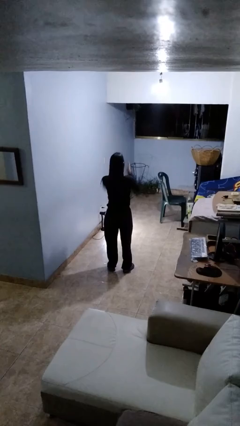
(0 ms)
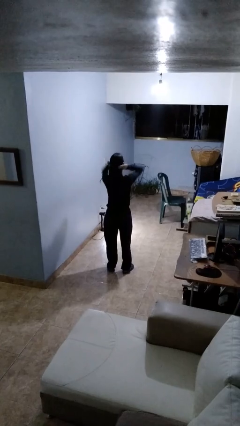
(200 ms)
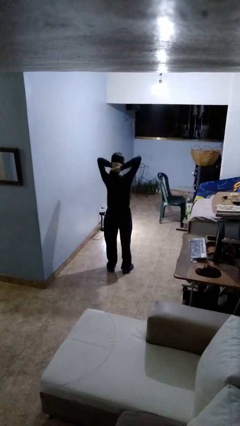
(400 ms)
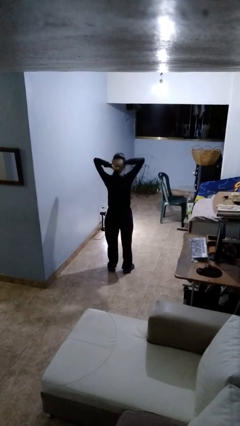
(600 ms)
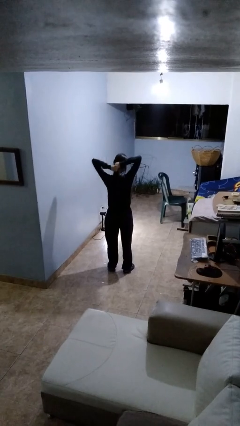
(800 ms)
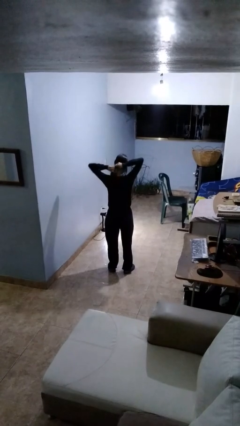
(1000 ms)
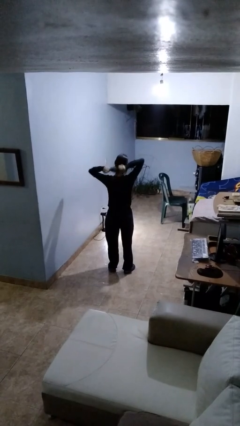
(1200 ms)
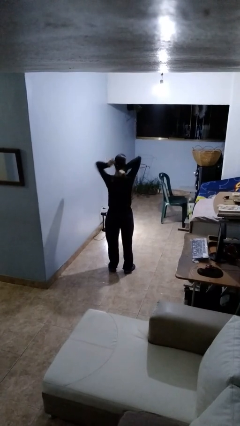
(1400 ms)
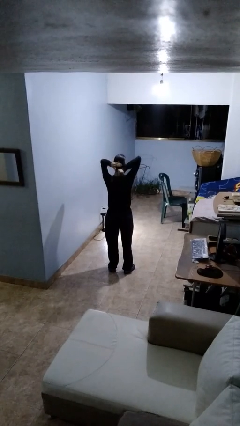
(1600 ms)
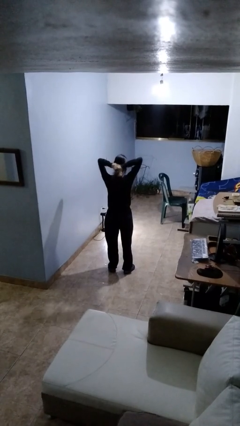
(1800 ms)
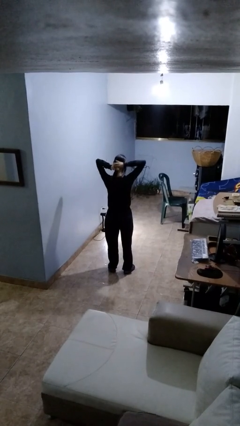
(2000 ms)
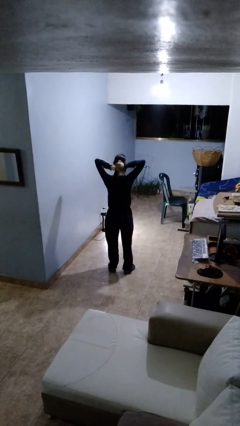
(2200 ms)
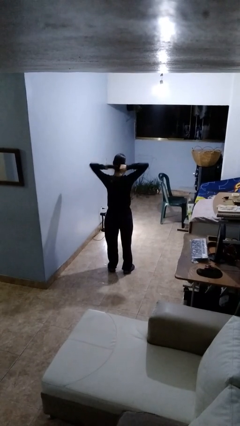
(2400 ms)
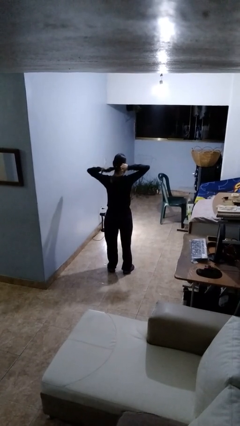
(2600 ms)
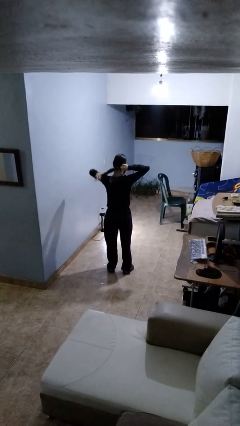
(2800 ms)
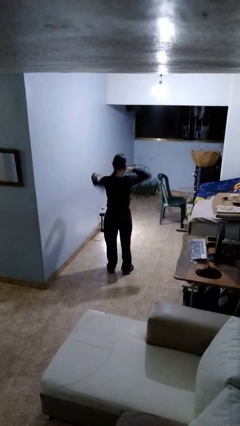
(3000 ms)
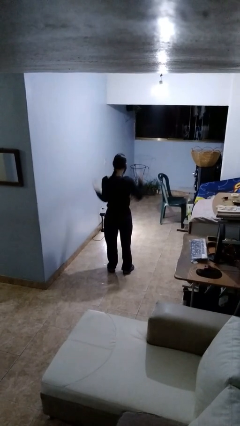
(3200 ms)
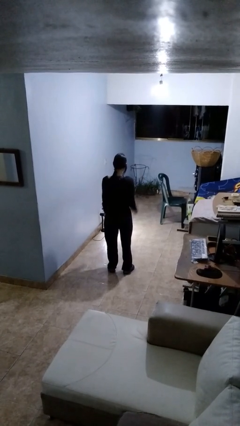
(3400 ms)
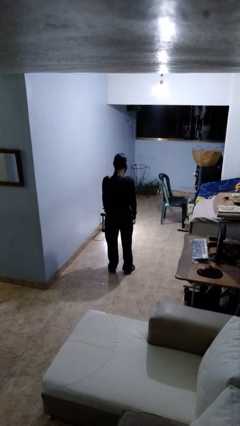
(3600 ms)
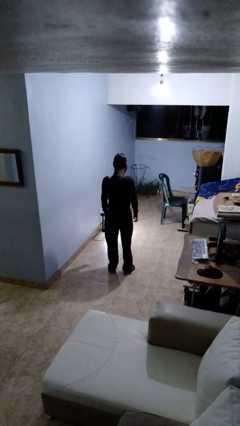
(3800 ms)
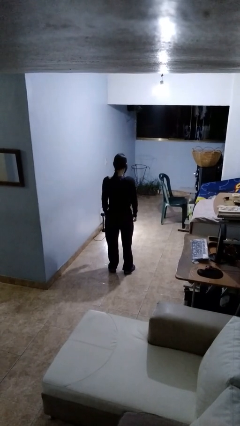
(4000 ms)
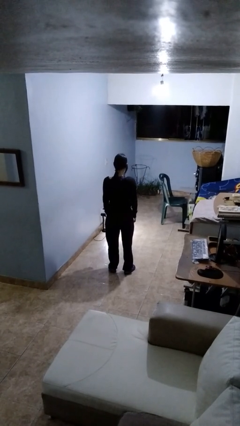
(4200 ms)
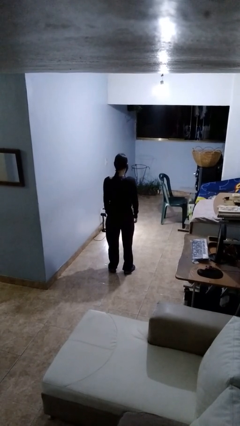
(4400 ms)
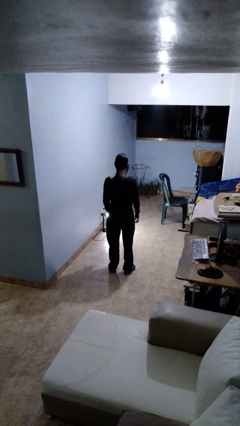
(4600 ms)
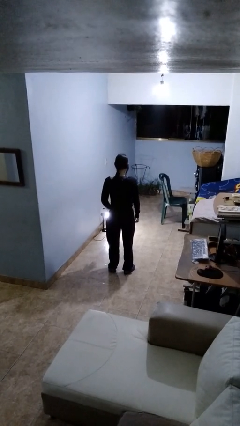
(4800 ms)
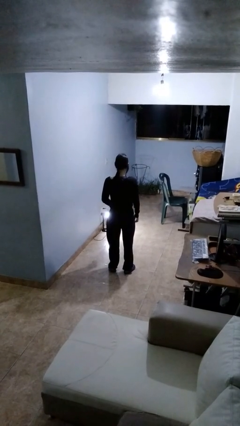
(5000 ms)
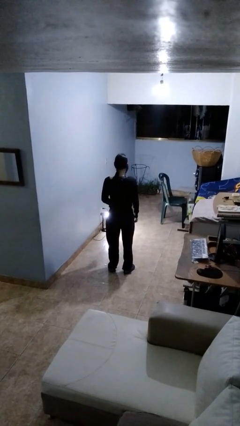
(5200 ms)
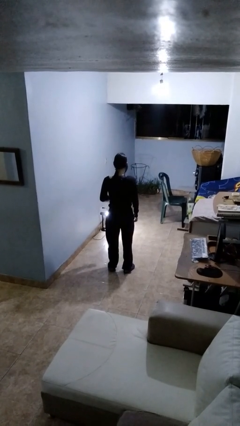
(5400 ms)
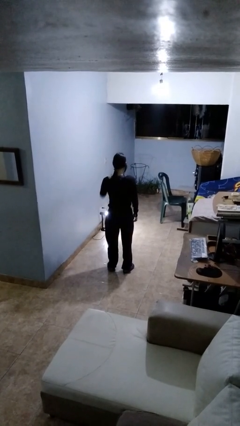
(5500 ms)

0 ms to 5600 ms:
person puts hair in ponytail

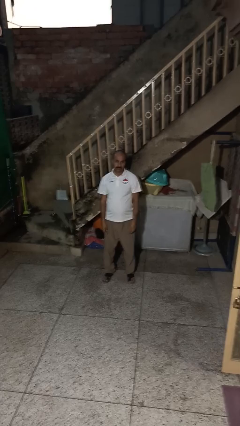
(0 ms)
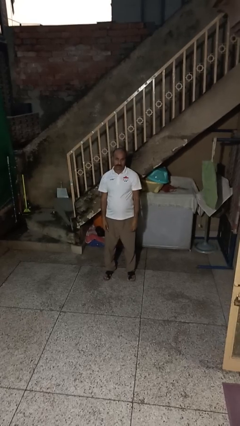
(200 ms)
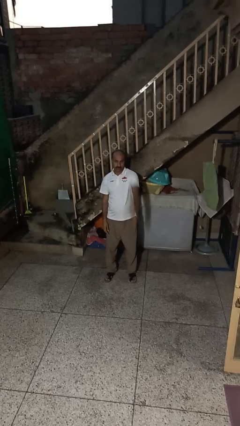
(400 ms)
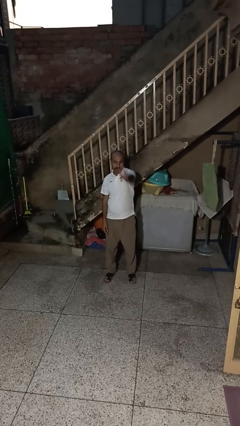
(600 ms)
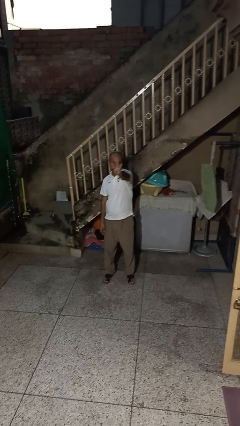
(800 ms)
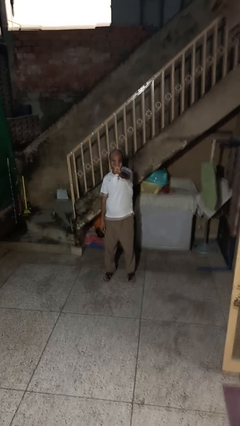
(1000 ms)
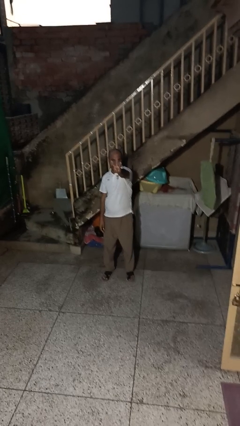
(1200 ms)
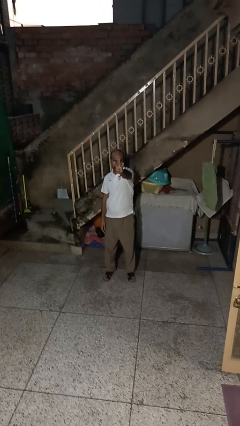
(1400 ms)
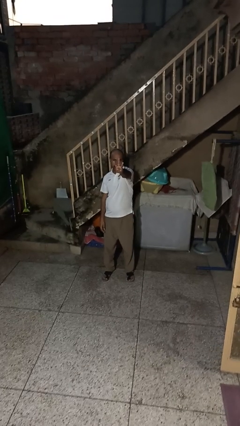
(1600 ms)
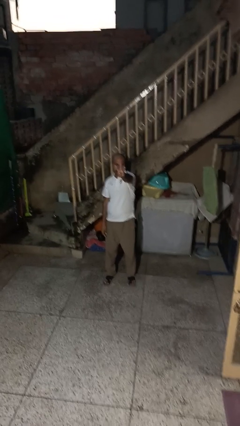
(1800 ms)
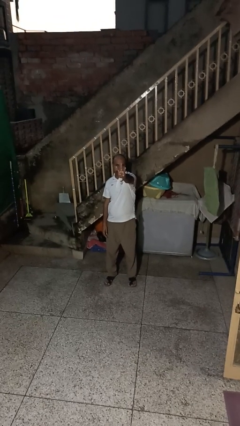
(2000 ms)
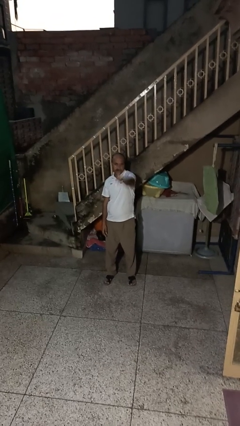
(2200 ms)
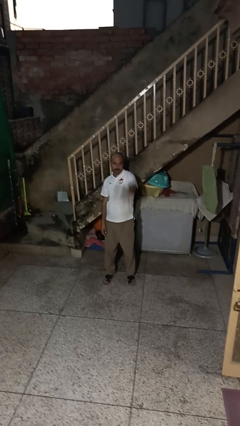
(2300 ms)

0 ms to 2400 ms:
person gestures number three

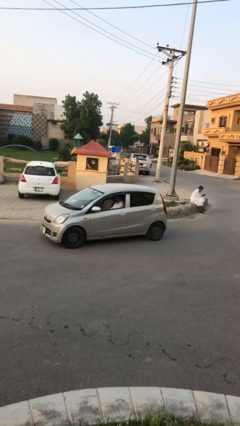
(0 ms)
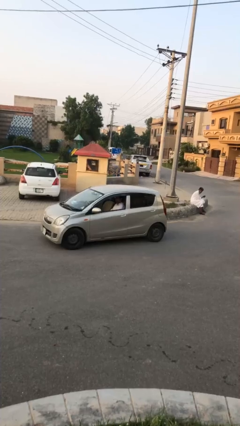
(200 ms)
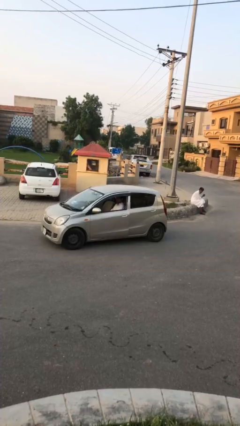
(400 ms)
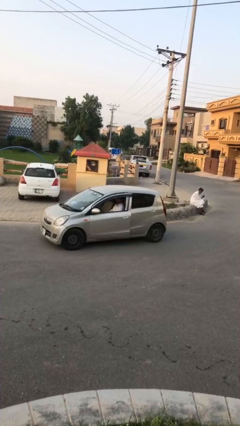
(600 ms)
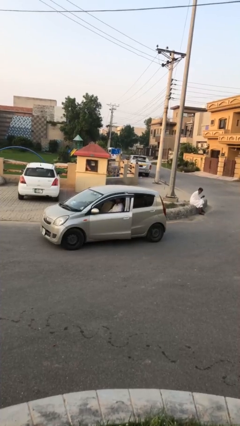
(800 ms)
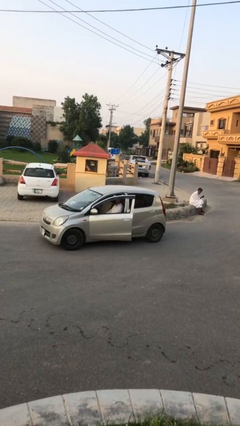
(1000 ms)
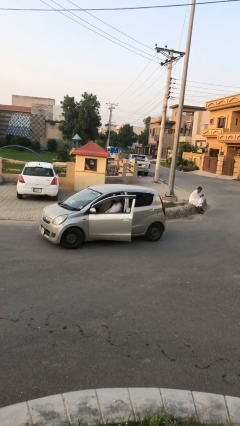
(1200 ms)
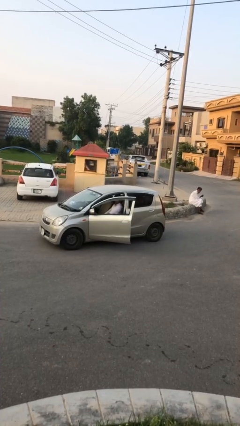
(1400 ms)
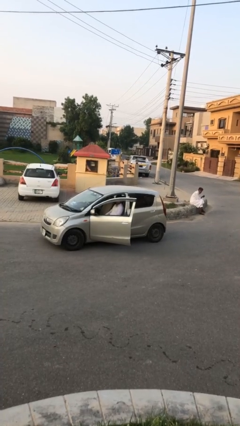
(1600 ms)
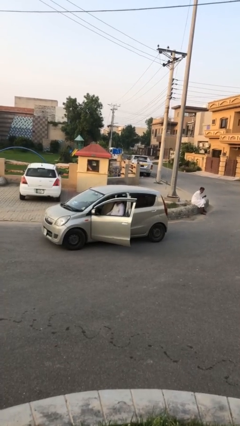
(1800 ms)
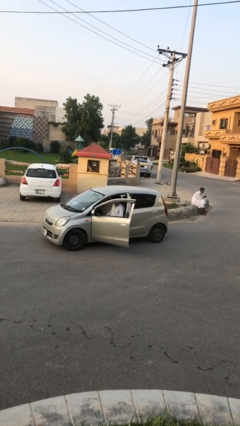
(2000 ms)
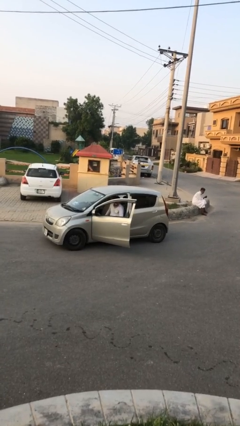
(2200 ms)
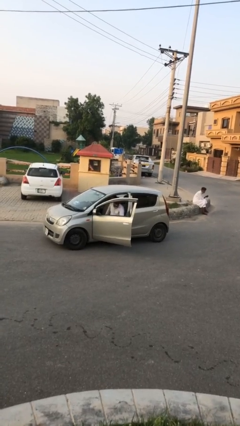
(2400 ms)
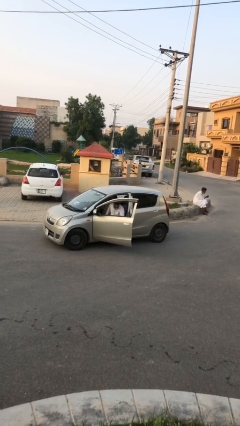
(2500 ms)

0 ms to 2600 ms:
person opens car door

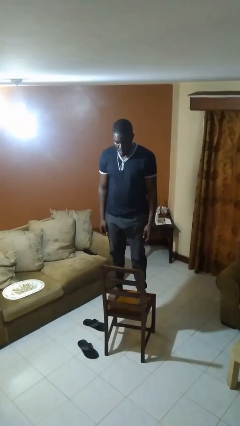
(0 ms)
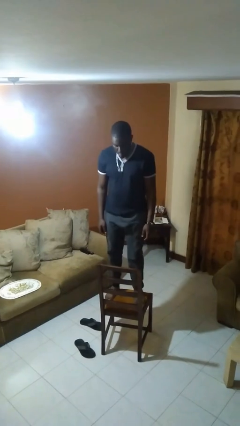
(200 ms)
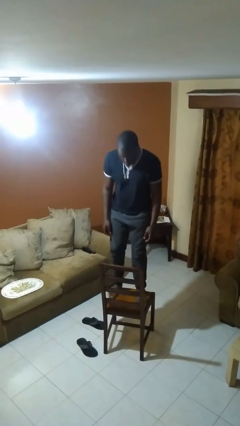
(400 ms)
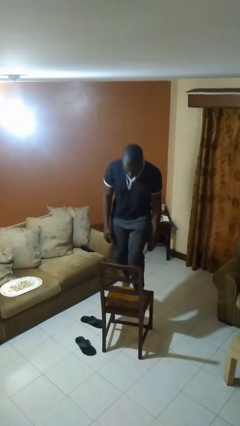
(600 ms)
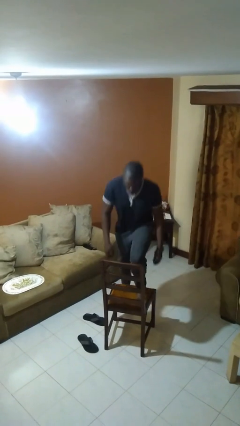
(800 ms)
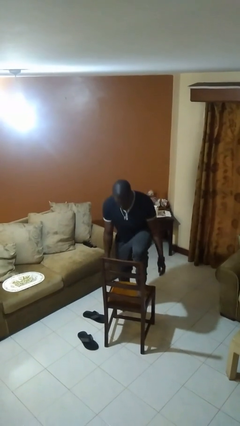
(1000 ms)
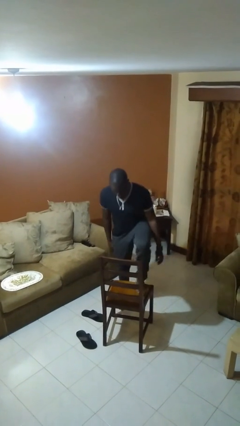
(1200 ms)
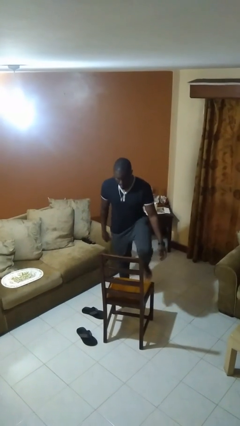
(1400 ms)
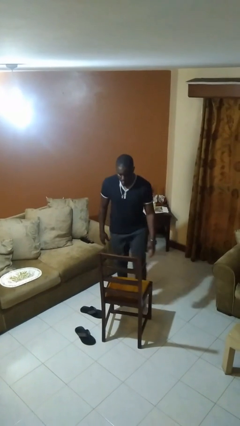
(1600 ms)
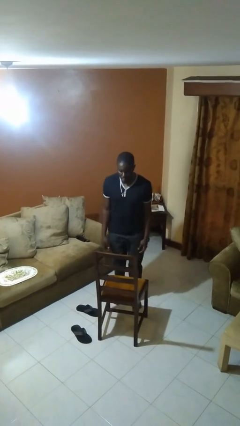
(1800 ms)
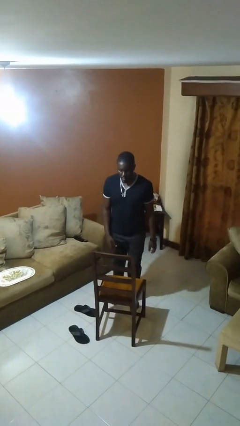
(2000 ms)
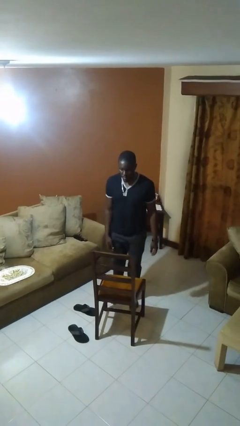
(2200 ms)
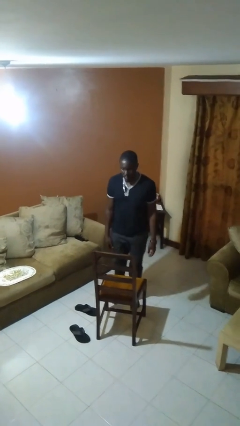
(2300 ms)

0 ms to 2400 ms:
person climbs off chair

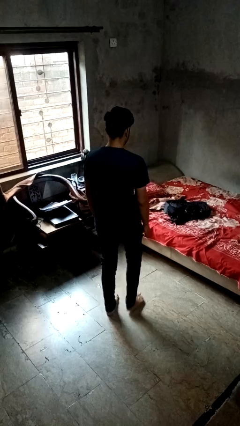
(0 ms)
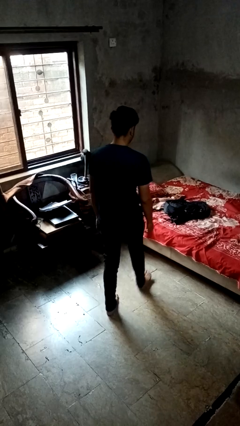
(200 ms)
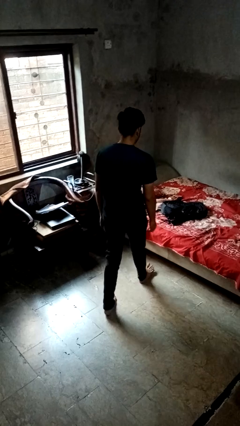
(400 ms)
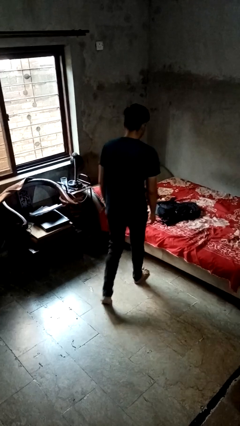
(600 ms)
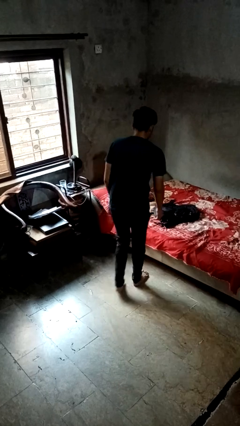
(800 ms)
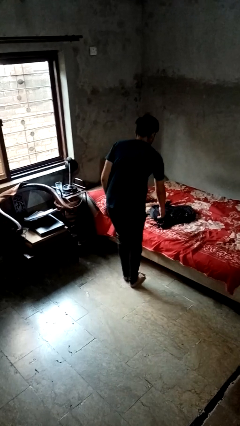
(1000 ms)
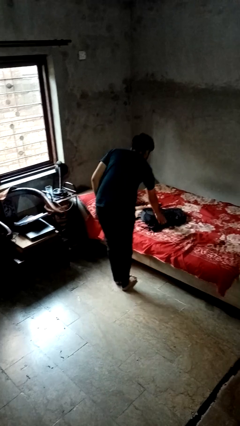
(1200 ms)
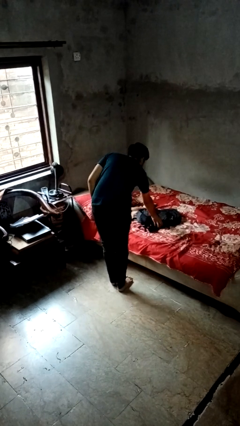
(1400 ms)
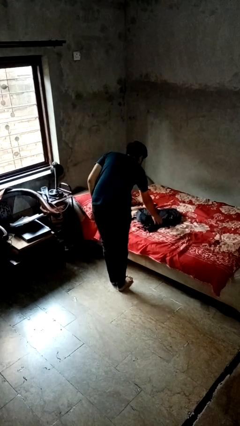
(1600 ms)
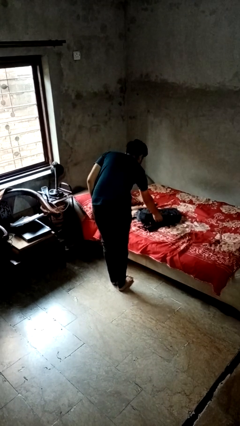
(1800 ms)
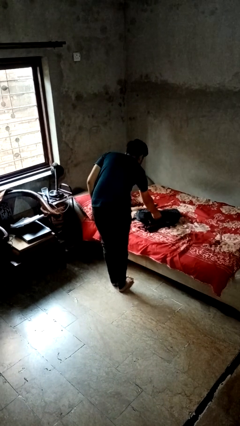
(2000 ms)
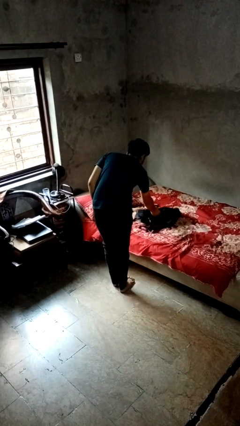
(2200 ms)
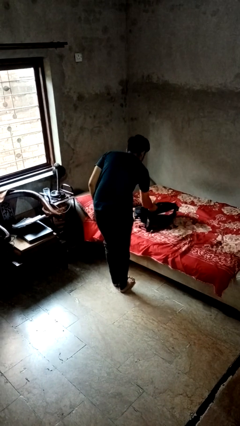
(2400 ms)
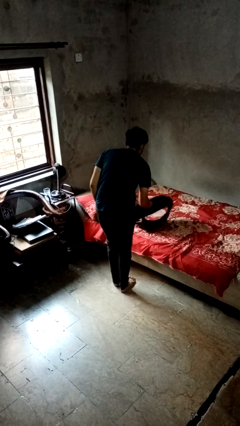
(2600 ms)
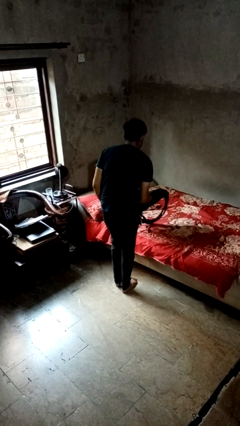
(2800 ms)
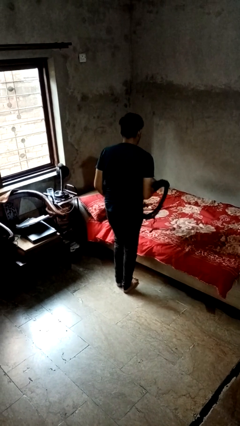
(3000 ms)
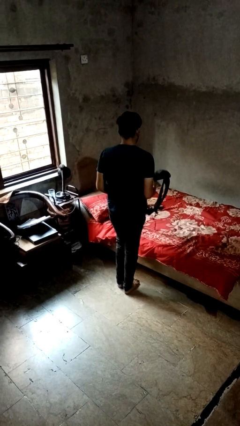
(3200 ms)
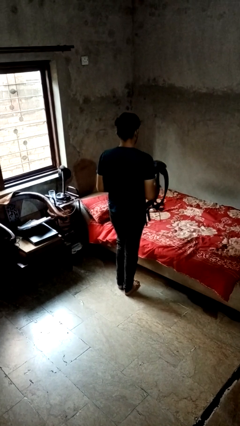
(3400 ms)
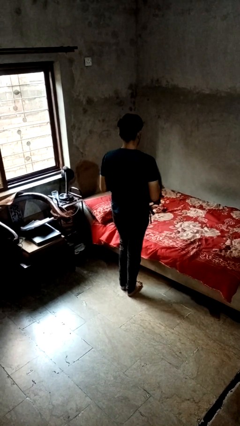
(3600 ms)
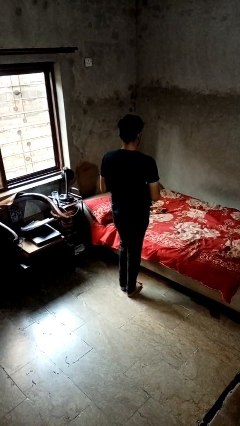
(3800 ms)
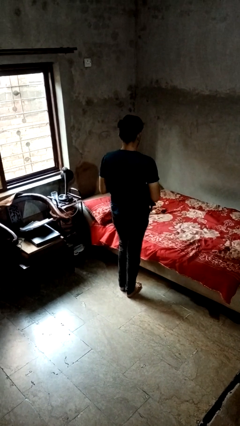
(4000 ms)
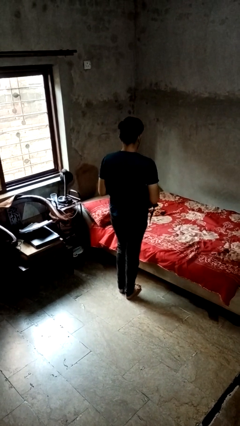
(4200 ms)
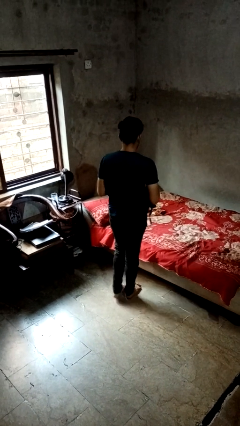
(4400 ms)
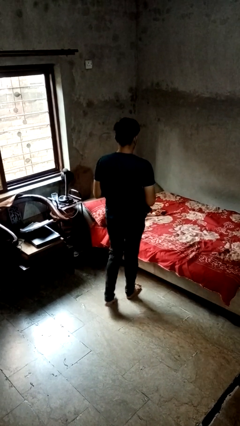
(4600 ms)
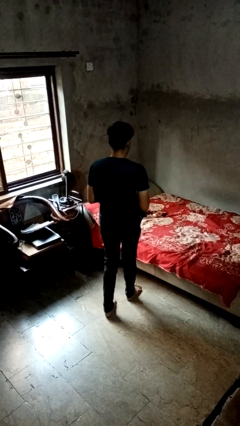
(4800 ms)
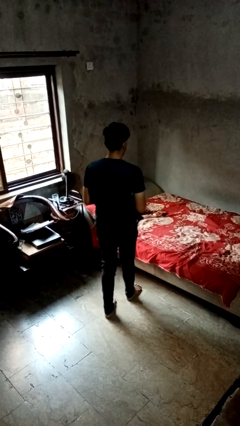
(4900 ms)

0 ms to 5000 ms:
person picks up object from bed
